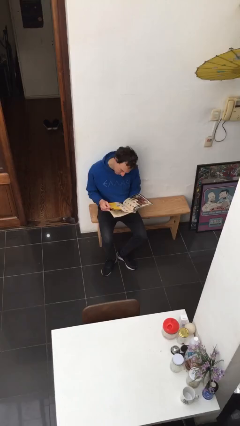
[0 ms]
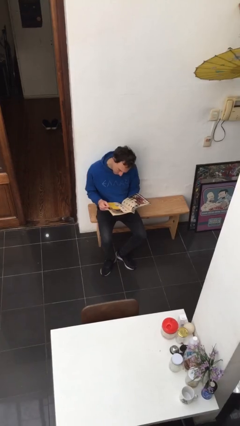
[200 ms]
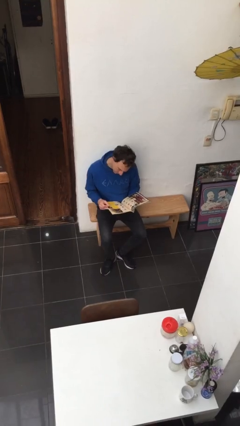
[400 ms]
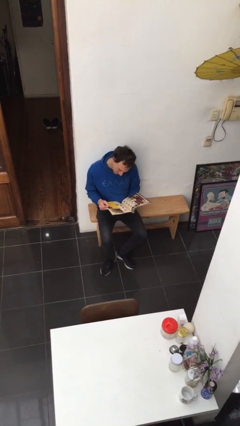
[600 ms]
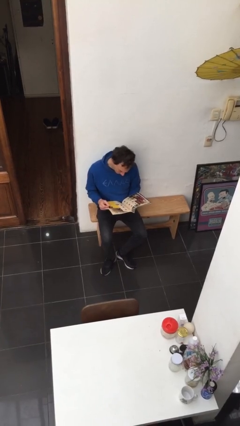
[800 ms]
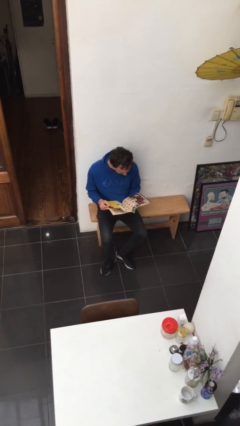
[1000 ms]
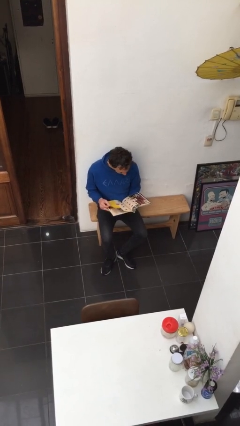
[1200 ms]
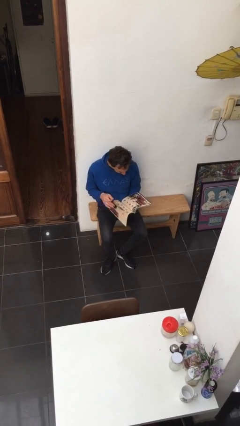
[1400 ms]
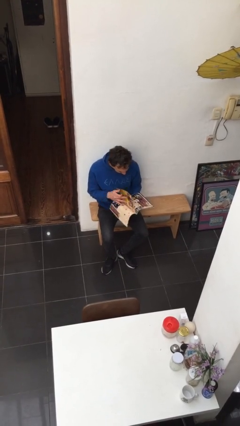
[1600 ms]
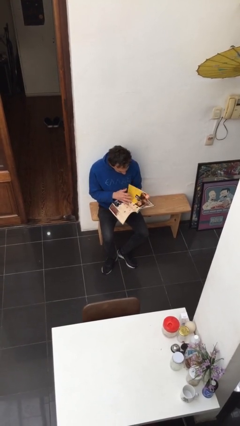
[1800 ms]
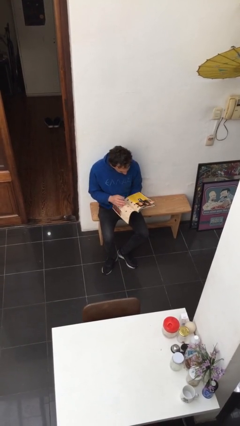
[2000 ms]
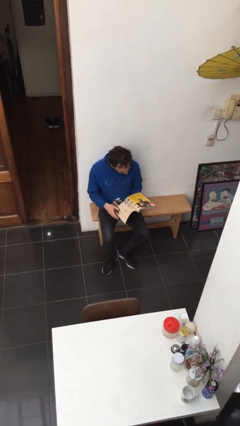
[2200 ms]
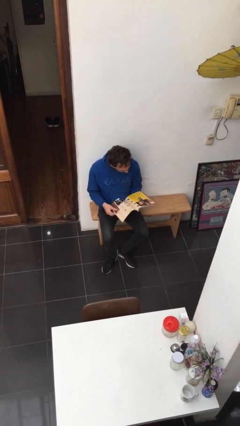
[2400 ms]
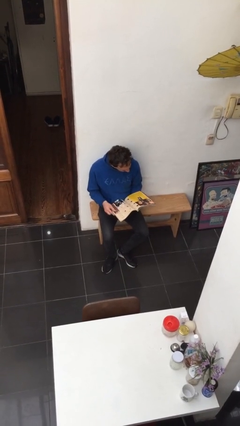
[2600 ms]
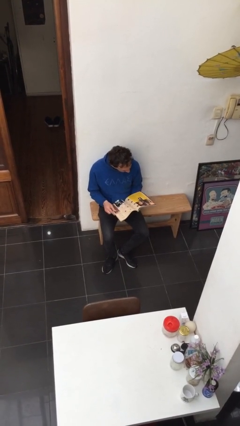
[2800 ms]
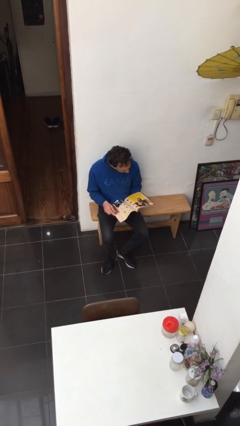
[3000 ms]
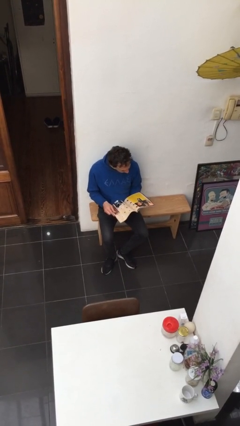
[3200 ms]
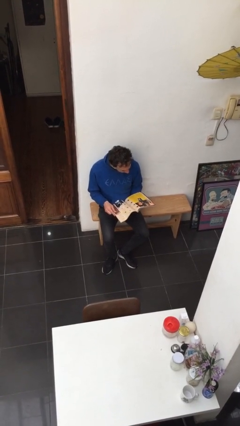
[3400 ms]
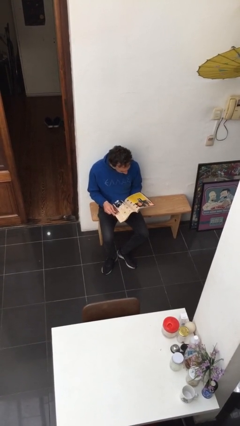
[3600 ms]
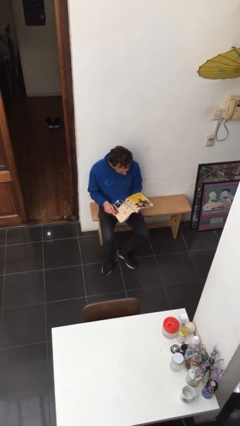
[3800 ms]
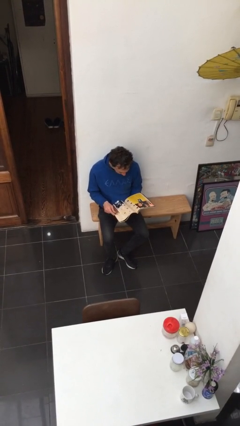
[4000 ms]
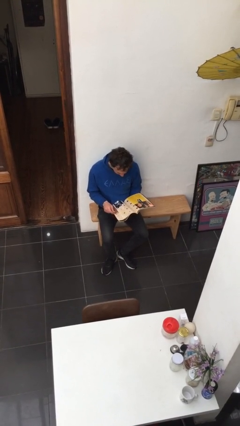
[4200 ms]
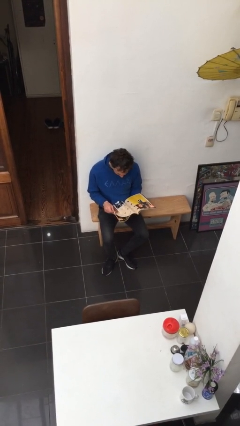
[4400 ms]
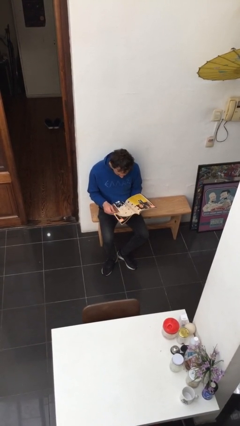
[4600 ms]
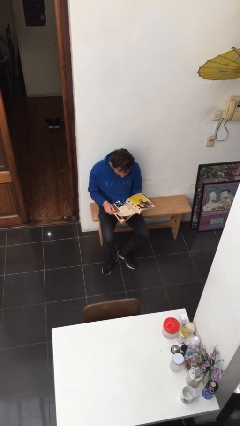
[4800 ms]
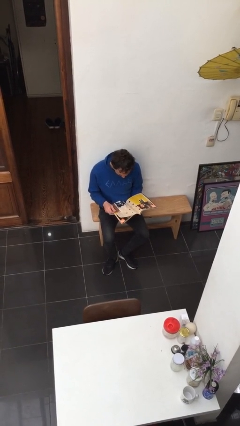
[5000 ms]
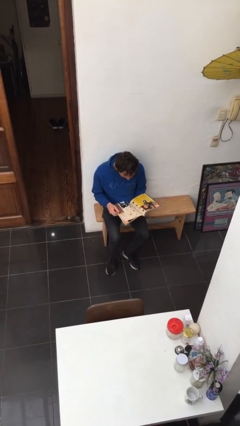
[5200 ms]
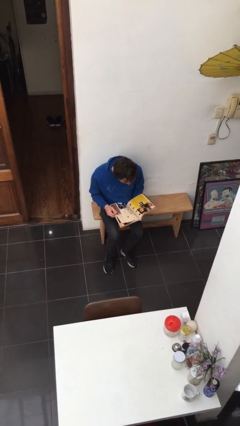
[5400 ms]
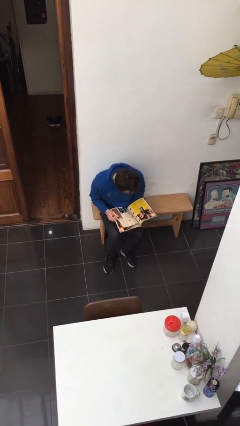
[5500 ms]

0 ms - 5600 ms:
person reads document

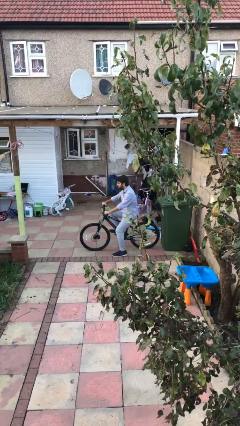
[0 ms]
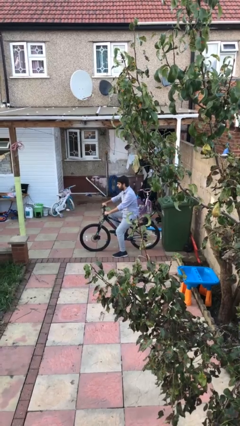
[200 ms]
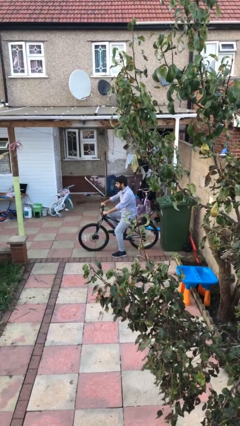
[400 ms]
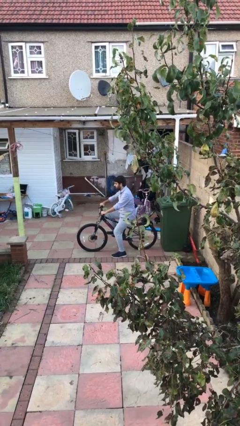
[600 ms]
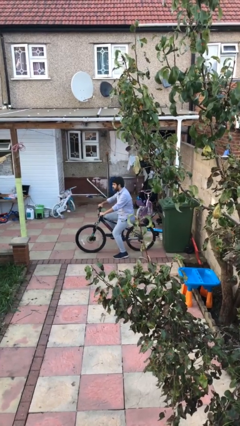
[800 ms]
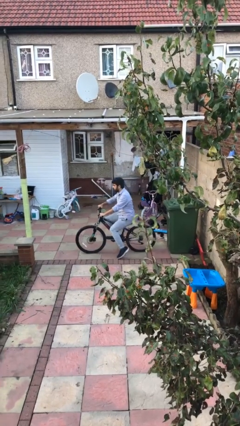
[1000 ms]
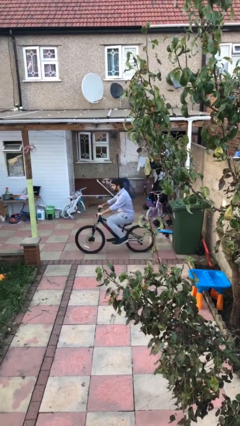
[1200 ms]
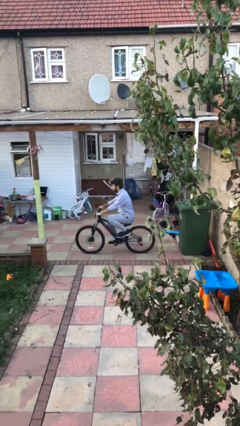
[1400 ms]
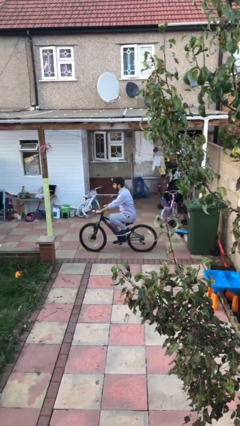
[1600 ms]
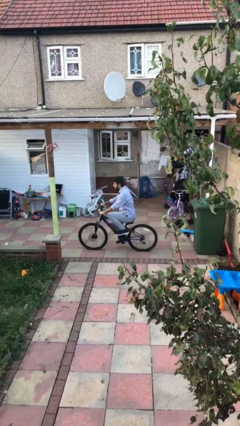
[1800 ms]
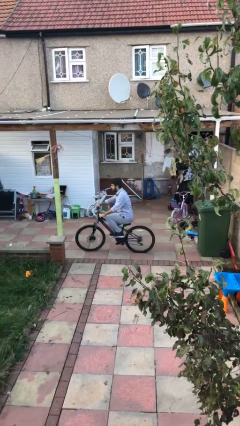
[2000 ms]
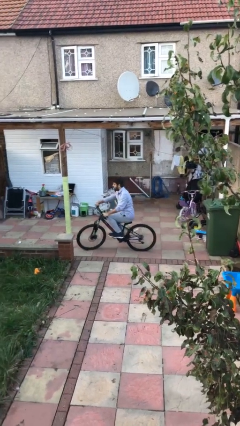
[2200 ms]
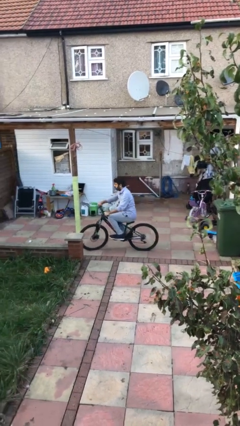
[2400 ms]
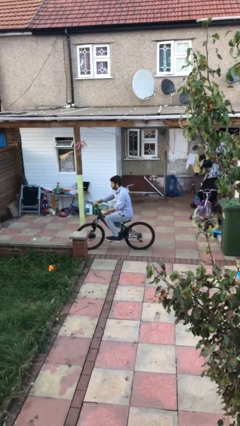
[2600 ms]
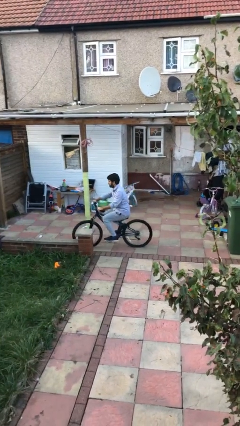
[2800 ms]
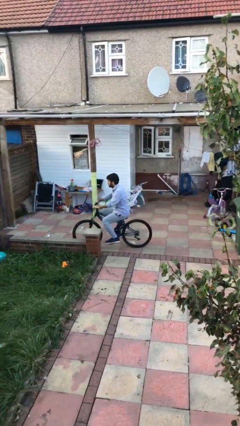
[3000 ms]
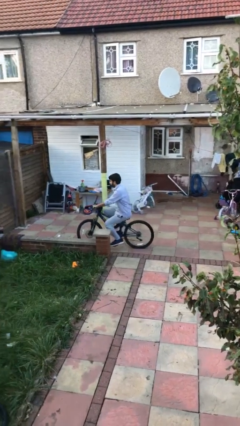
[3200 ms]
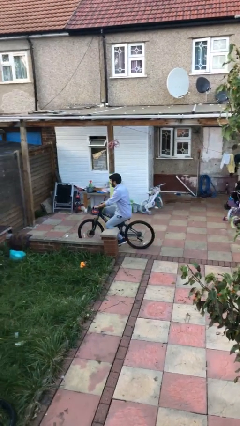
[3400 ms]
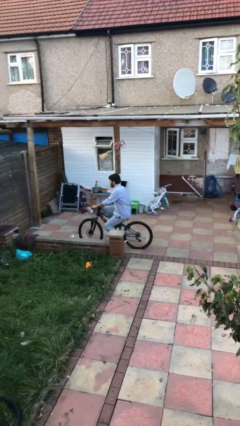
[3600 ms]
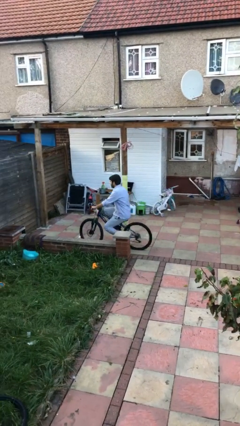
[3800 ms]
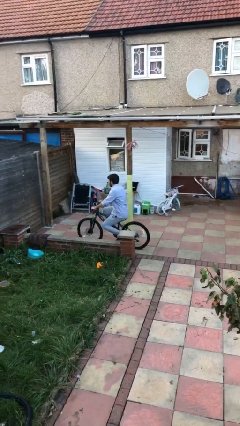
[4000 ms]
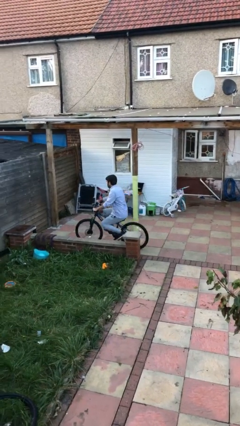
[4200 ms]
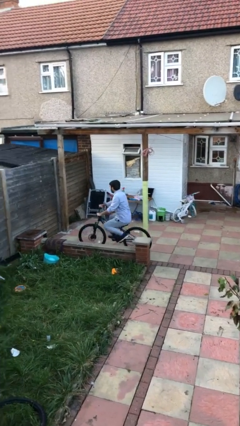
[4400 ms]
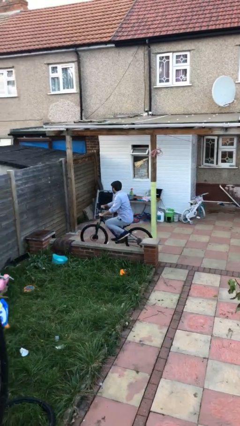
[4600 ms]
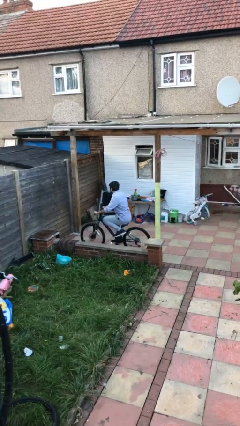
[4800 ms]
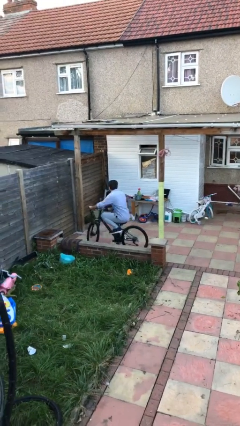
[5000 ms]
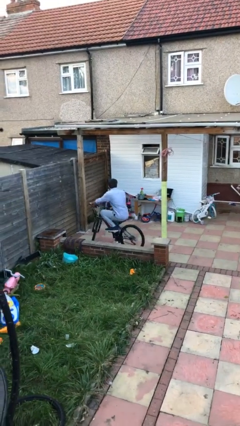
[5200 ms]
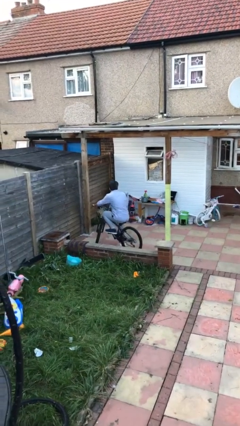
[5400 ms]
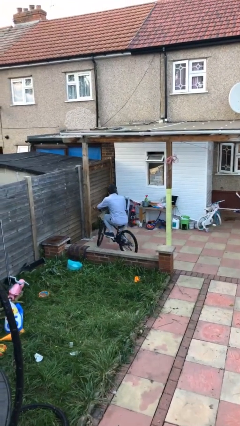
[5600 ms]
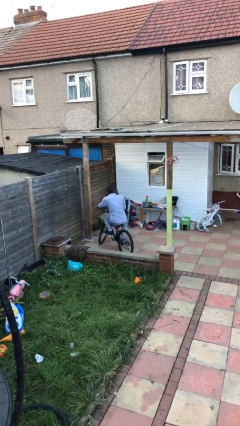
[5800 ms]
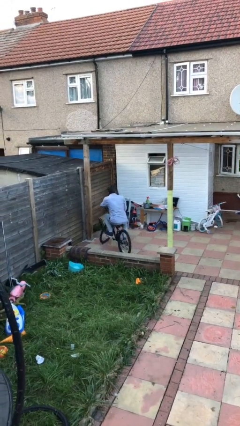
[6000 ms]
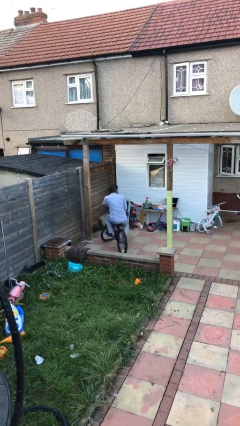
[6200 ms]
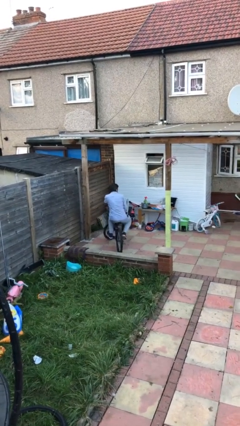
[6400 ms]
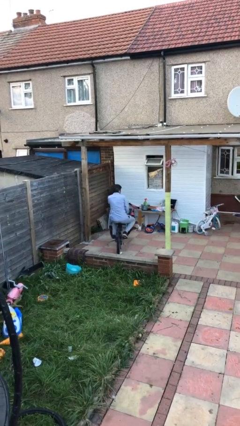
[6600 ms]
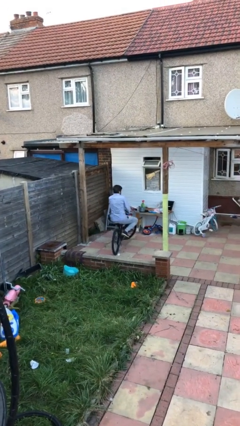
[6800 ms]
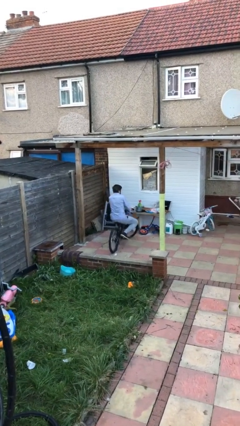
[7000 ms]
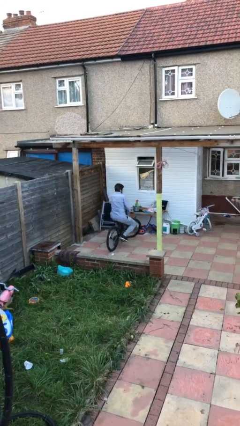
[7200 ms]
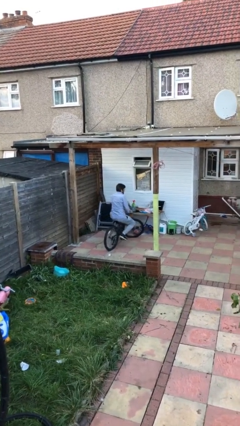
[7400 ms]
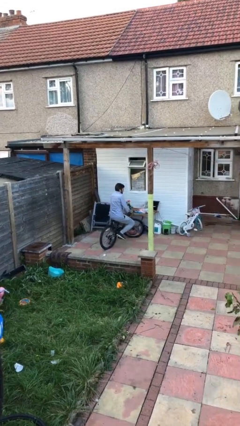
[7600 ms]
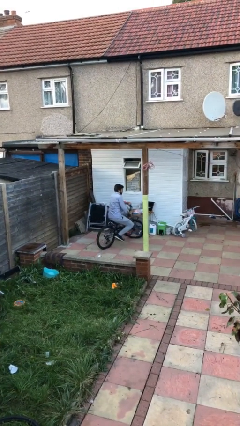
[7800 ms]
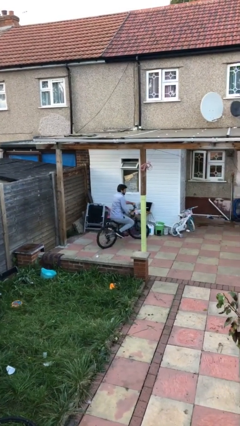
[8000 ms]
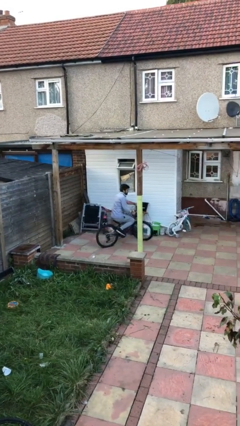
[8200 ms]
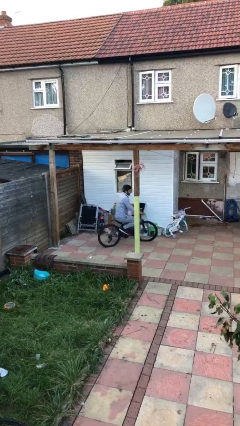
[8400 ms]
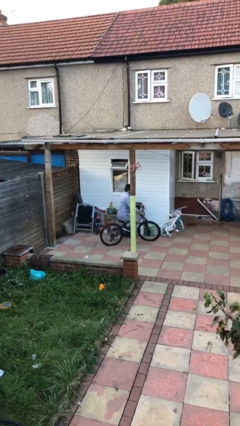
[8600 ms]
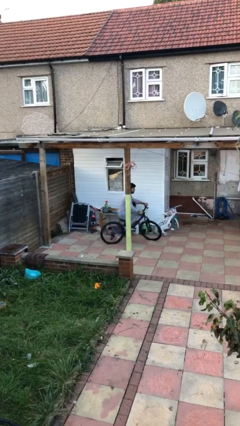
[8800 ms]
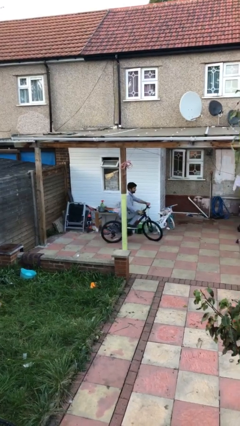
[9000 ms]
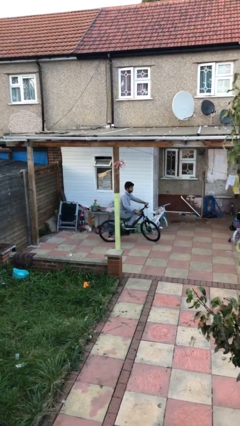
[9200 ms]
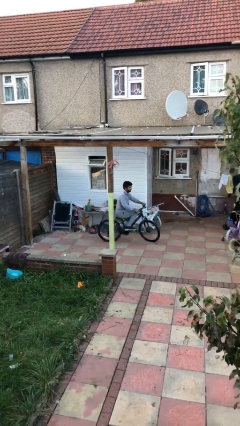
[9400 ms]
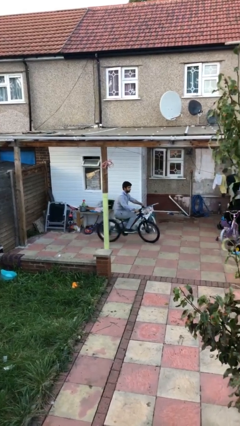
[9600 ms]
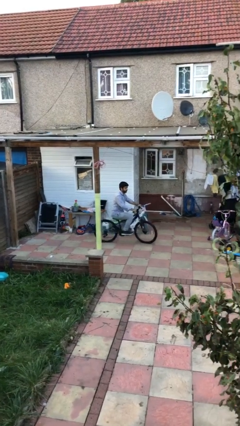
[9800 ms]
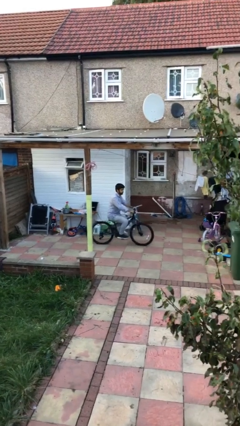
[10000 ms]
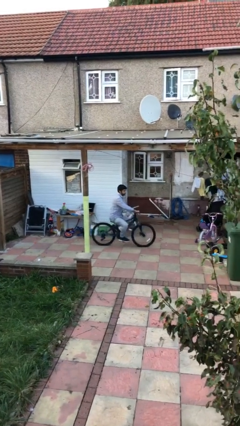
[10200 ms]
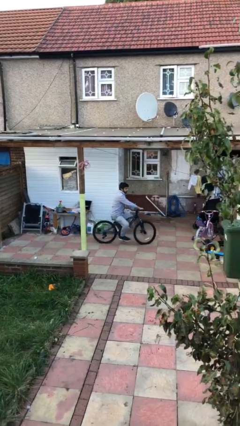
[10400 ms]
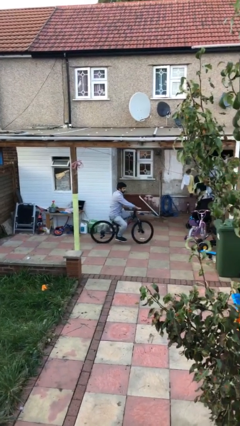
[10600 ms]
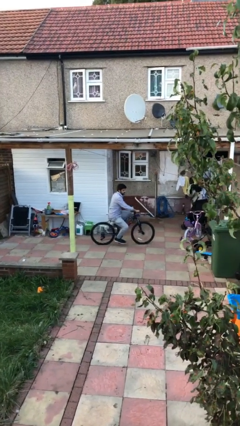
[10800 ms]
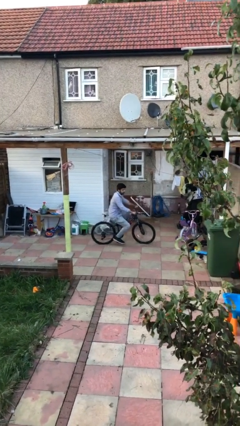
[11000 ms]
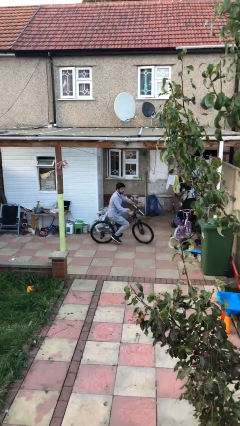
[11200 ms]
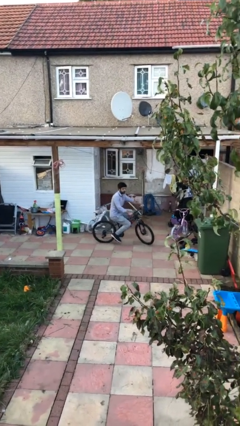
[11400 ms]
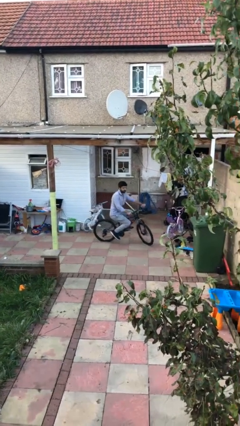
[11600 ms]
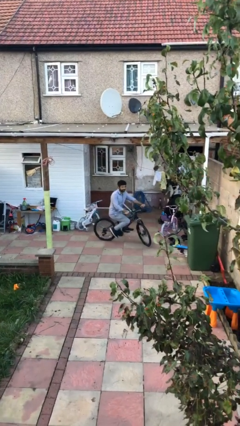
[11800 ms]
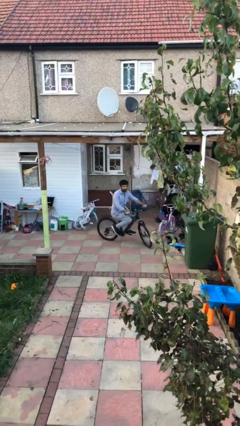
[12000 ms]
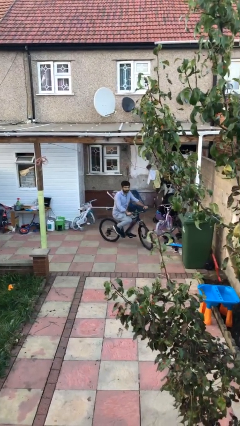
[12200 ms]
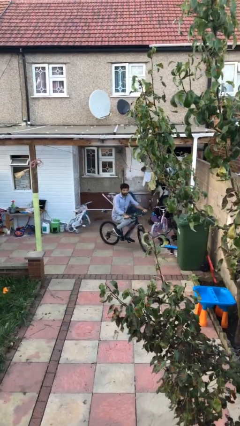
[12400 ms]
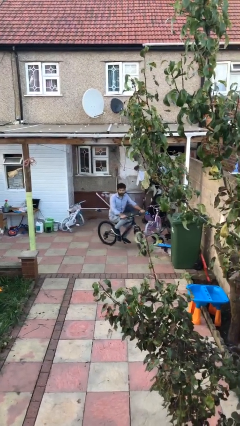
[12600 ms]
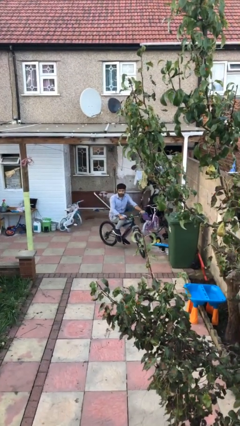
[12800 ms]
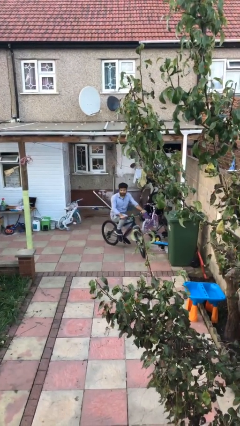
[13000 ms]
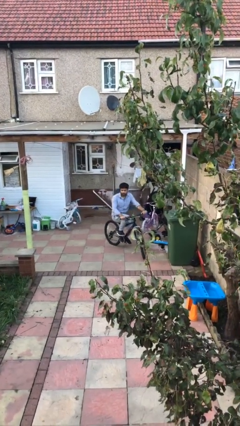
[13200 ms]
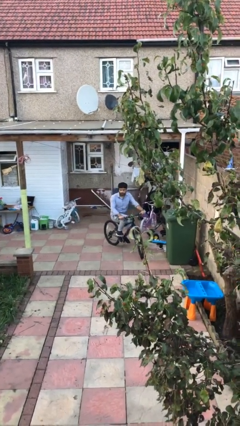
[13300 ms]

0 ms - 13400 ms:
person rides bicycle
